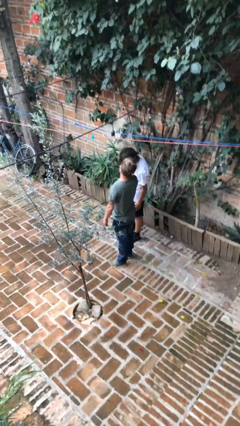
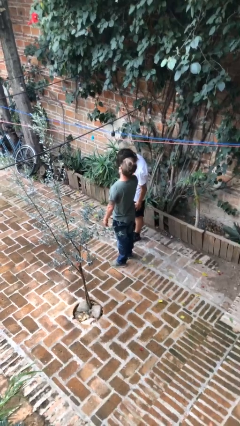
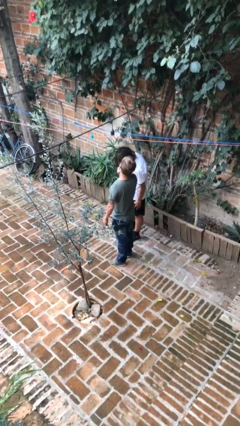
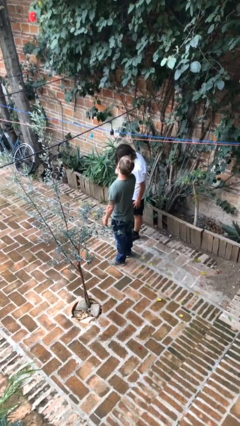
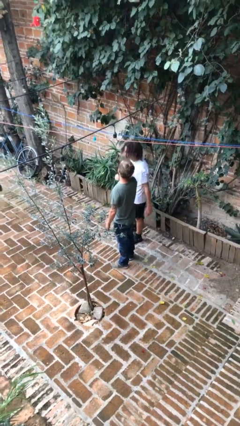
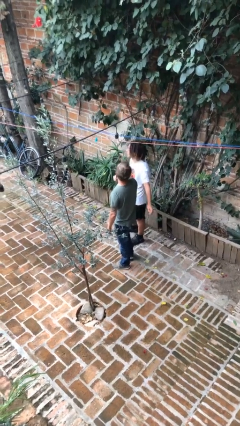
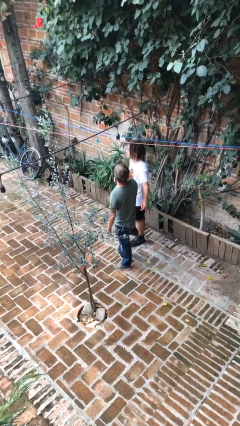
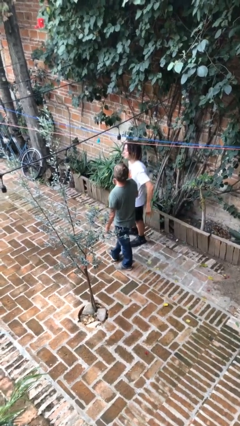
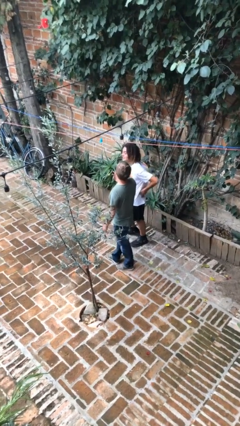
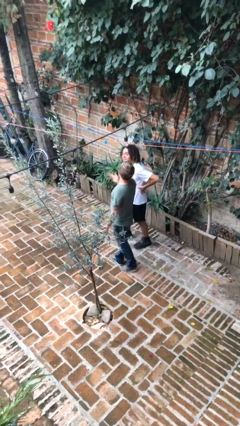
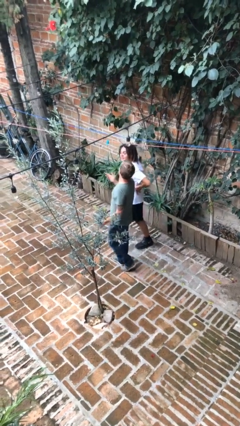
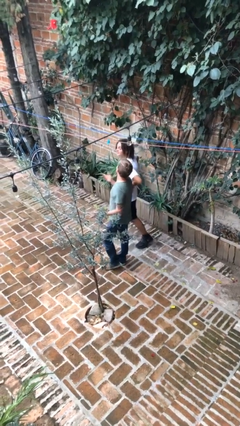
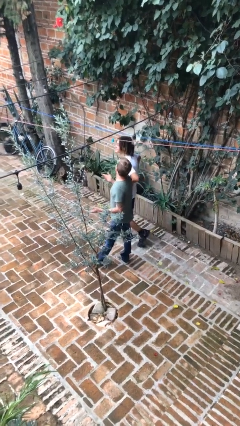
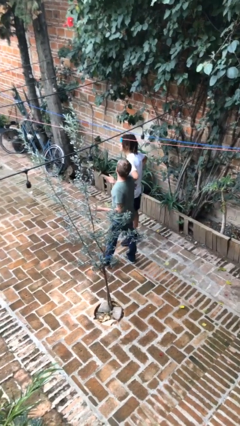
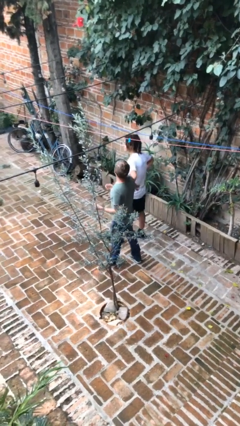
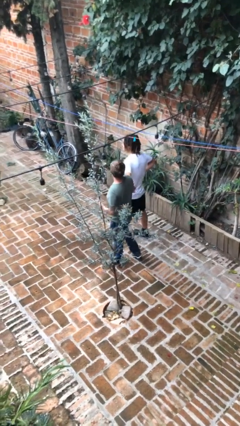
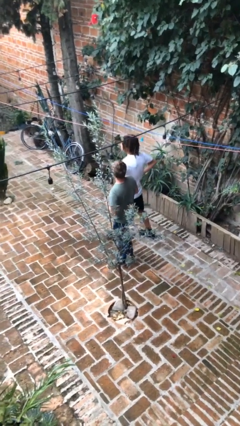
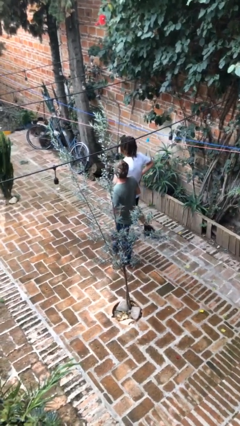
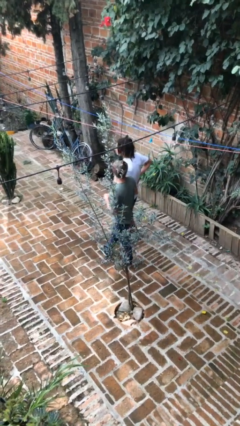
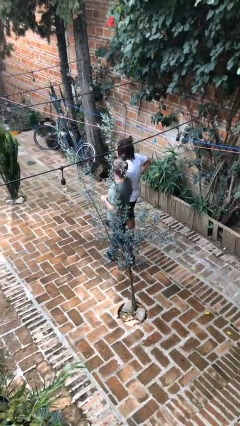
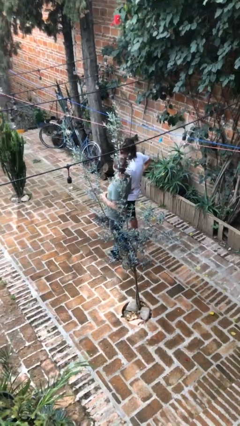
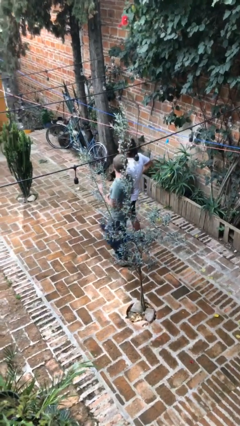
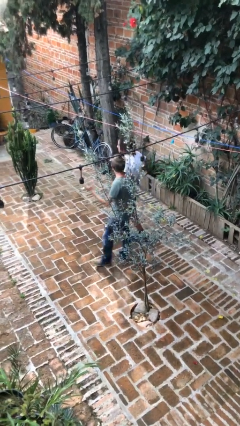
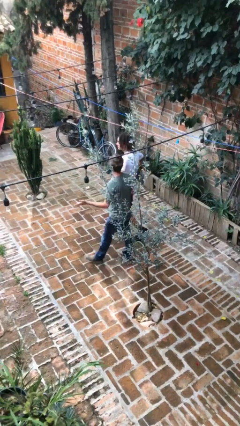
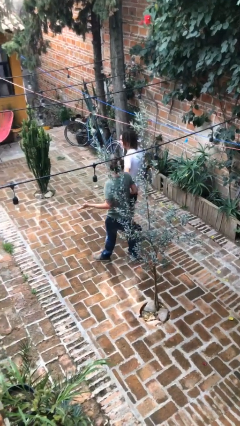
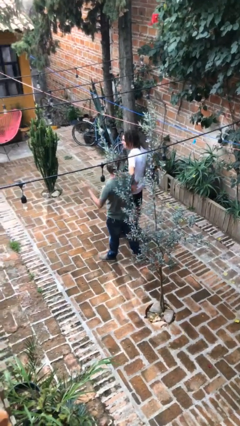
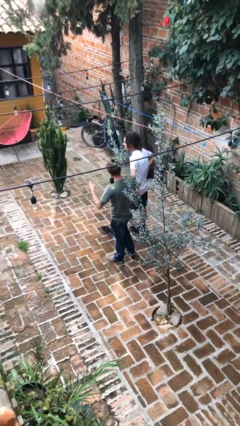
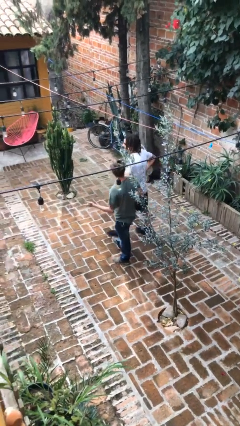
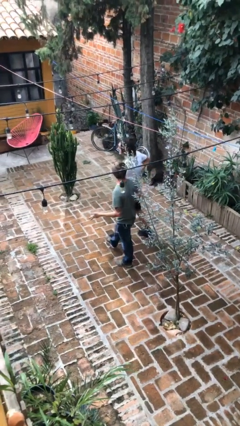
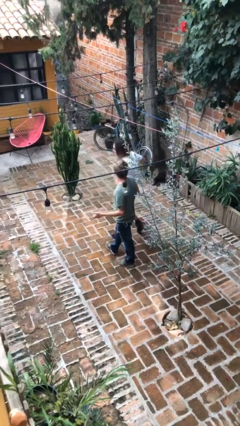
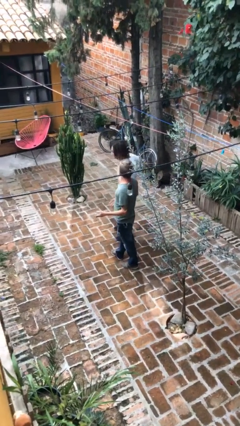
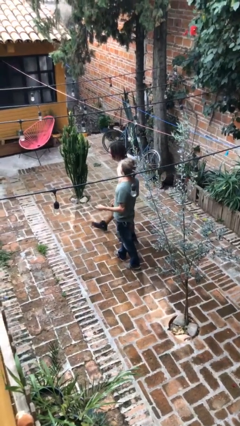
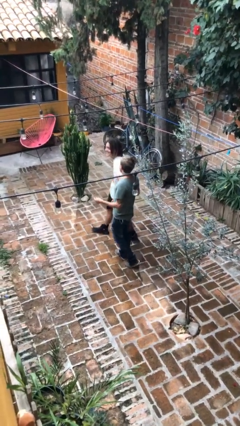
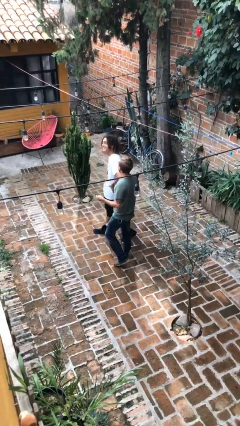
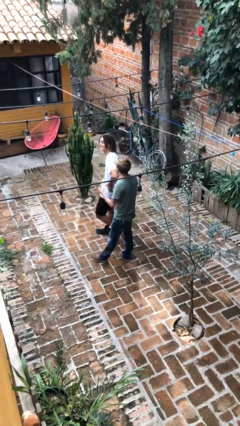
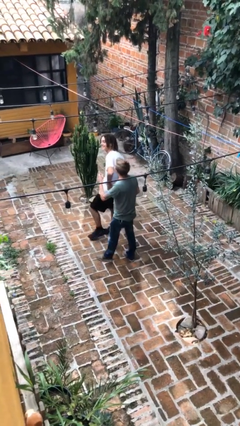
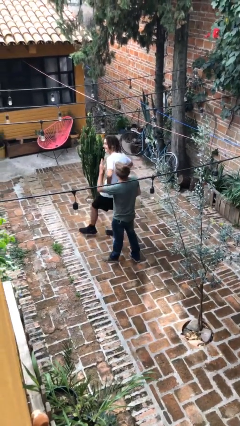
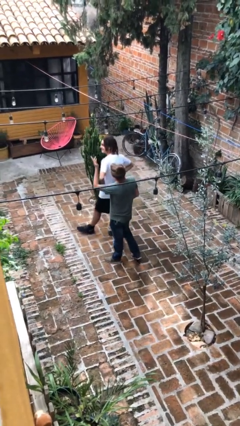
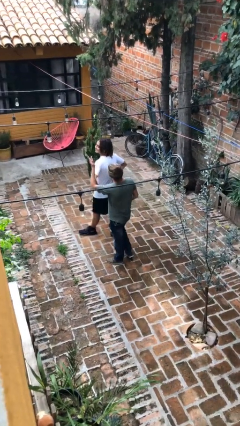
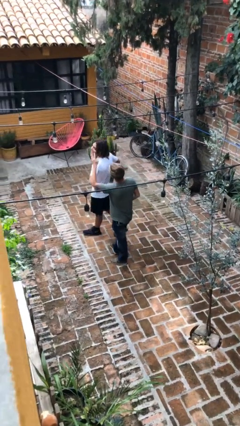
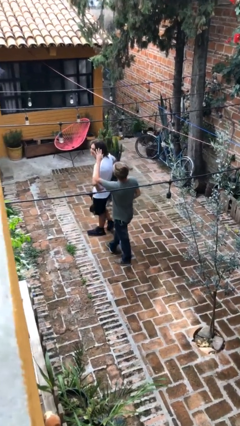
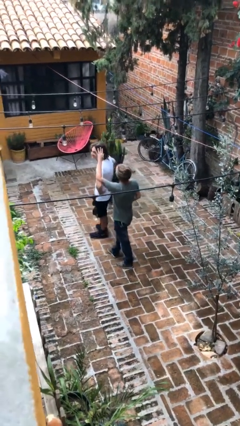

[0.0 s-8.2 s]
person talks to person

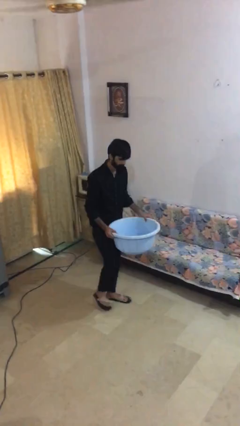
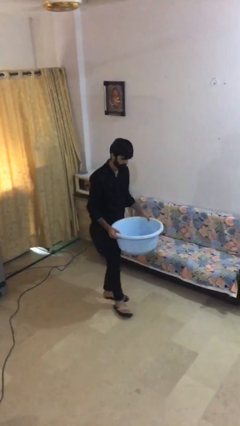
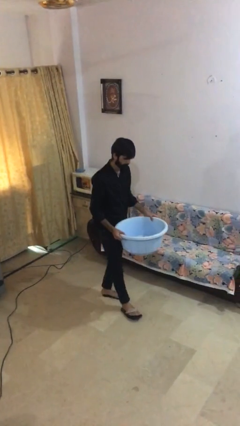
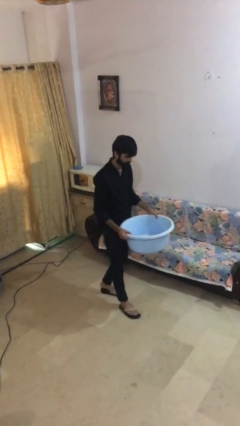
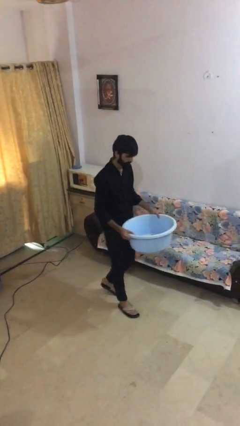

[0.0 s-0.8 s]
person puts down object on floor

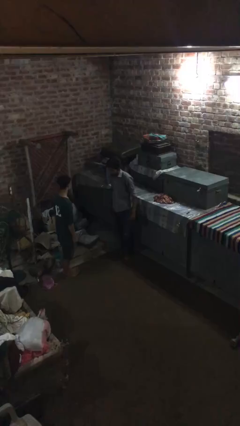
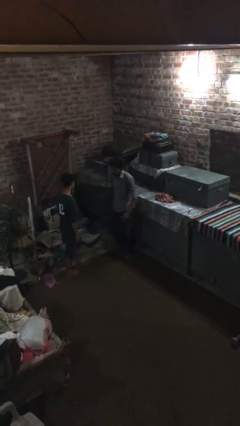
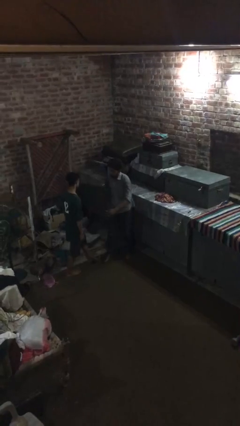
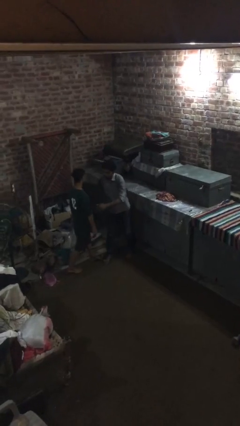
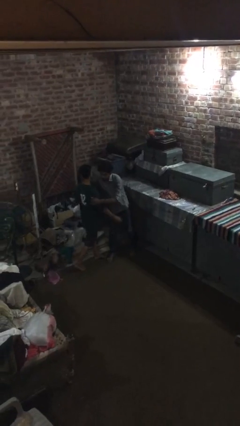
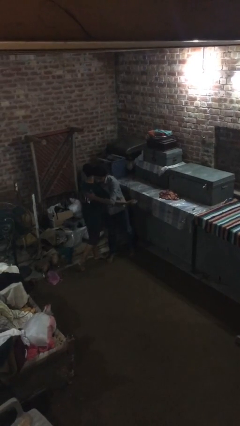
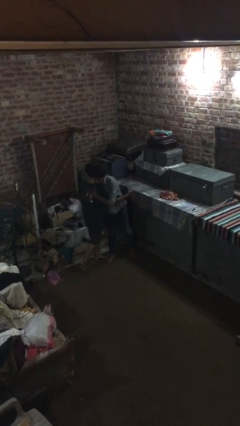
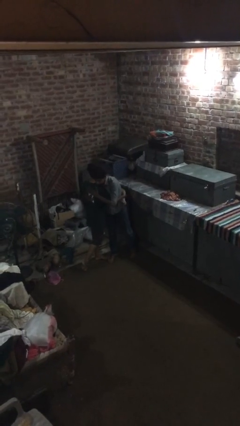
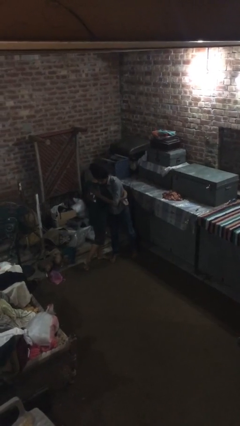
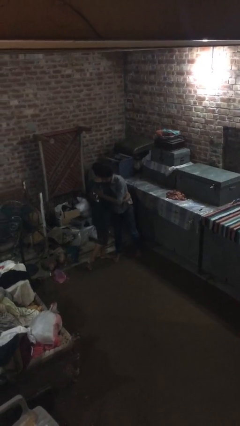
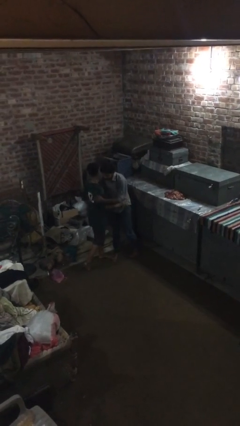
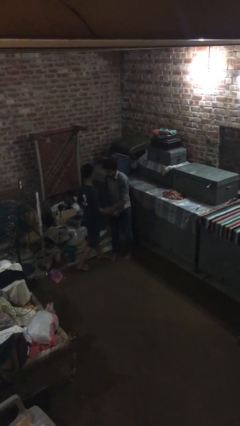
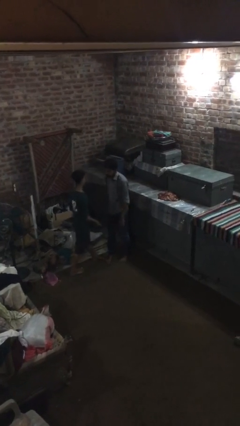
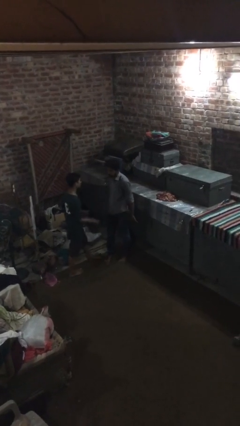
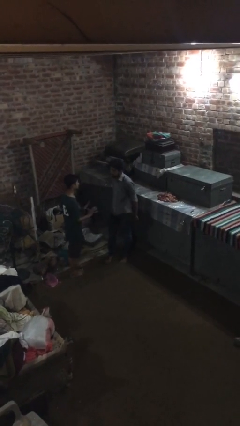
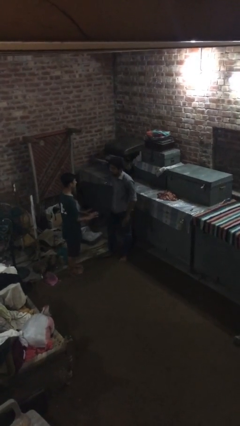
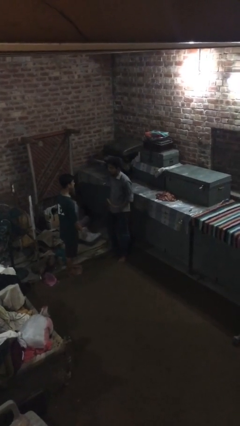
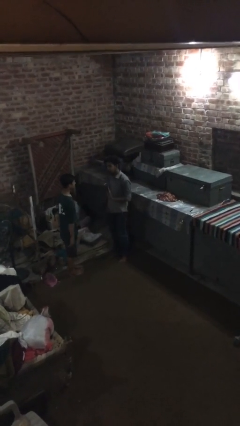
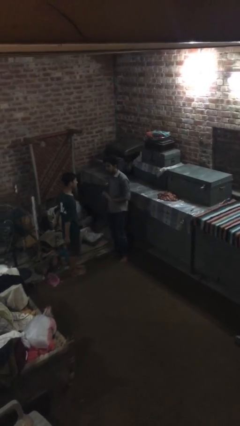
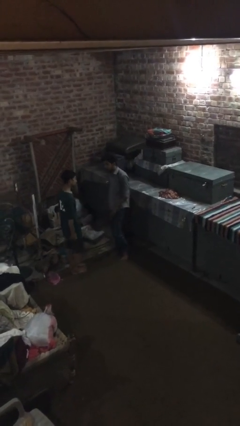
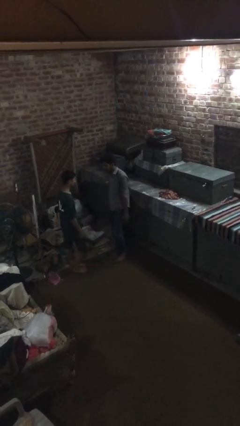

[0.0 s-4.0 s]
person embraces person

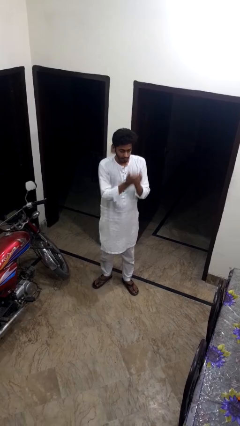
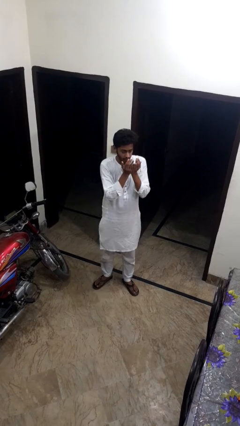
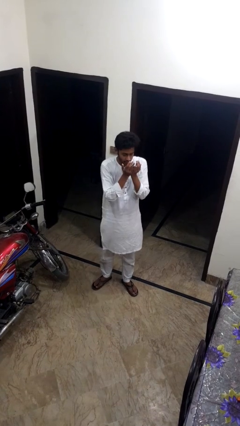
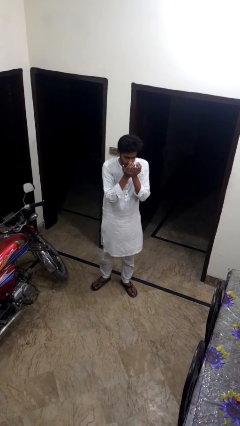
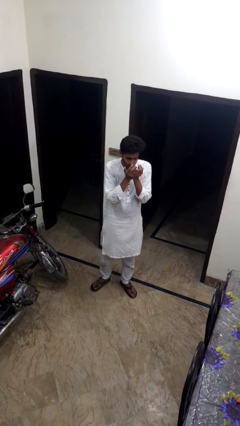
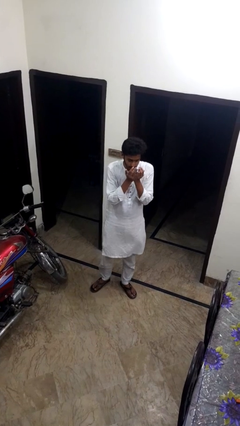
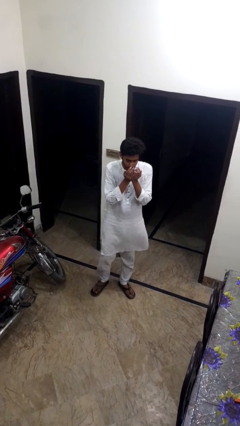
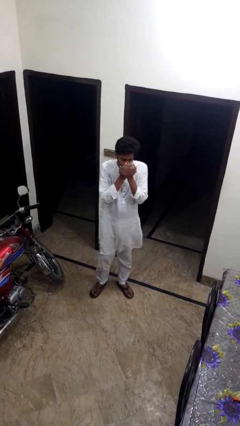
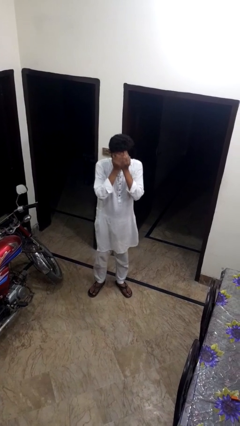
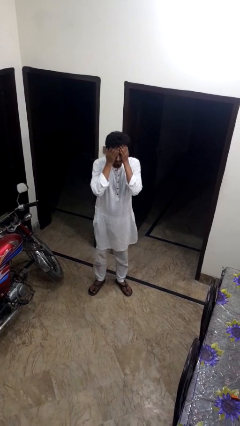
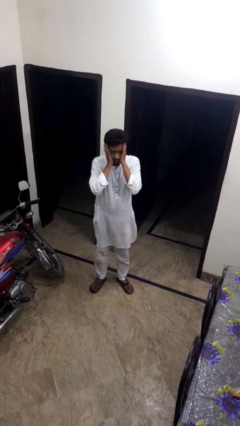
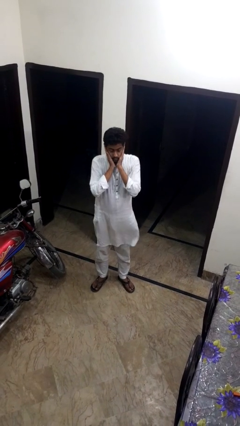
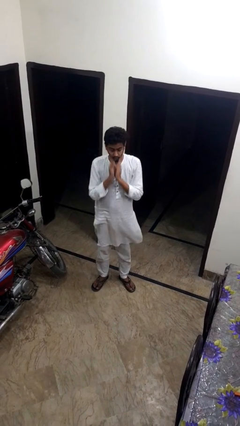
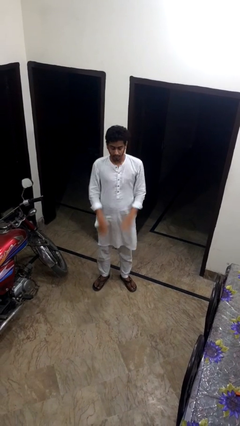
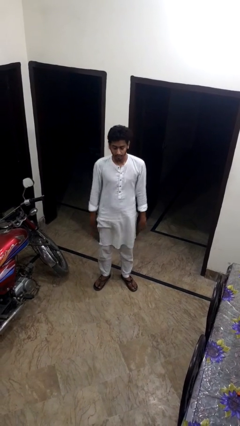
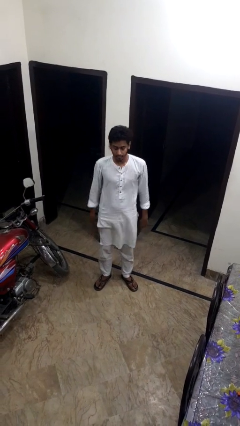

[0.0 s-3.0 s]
person prays

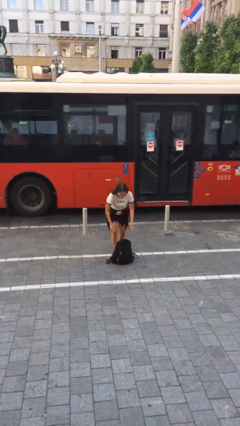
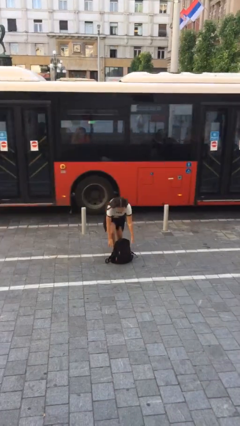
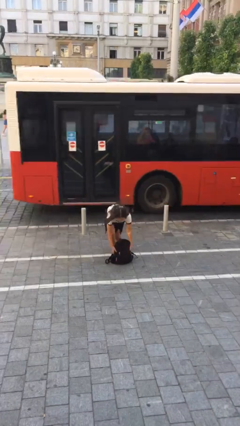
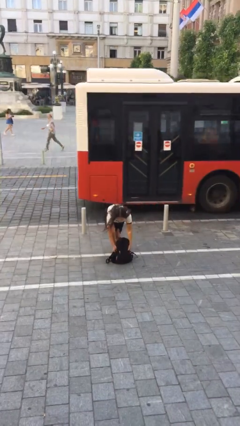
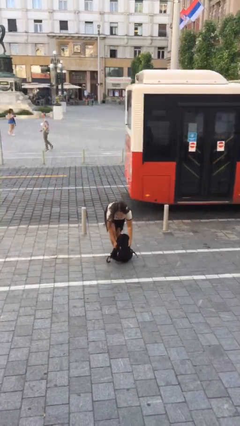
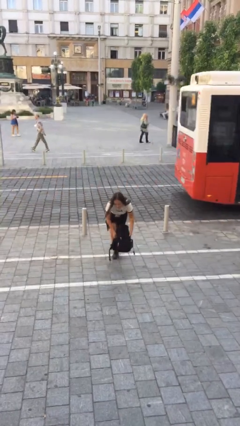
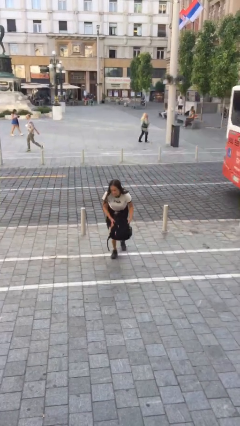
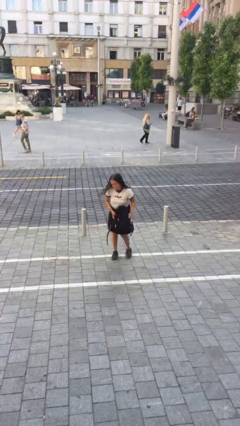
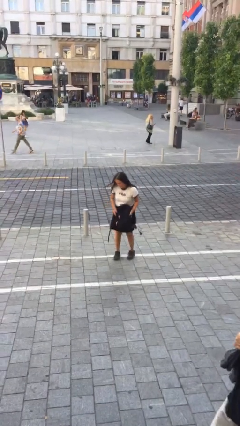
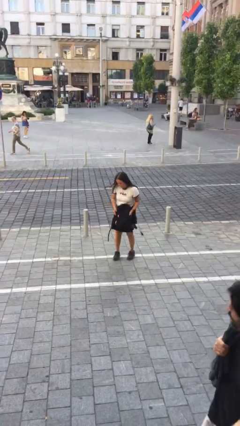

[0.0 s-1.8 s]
person picks up object from floor
